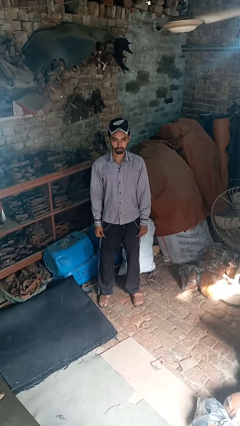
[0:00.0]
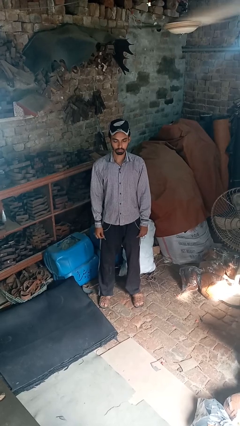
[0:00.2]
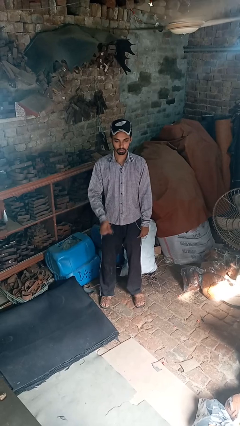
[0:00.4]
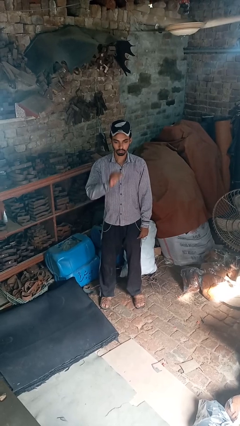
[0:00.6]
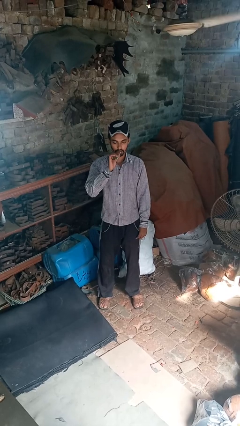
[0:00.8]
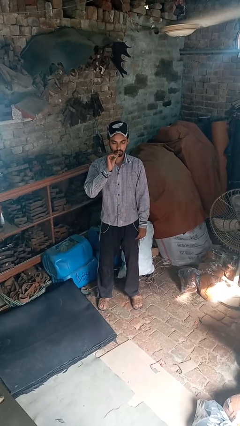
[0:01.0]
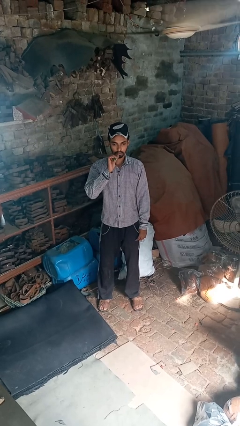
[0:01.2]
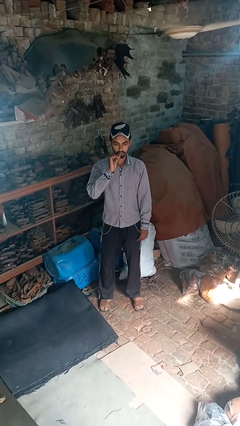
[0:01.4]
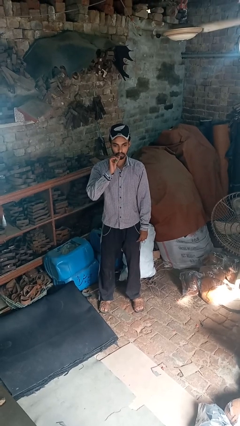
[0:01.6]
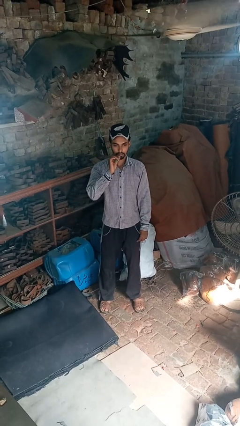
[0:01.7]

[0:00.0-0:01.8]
person flosses

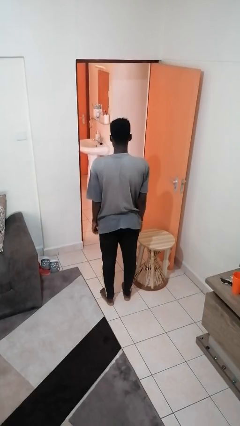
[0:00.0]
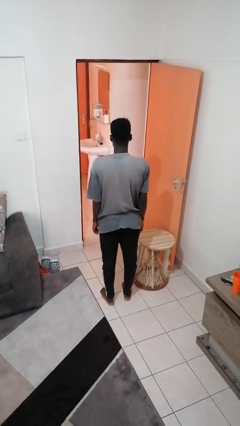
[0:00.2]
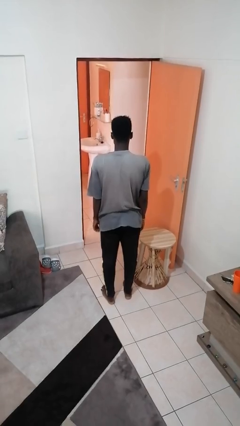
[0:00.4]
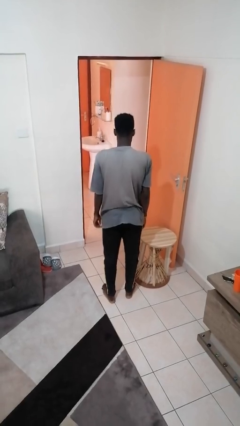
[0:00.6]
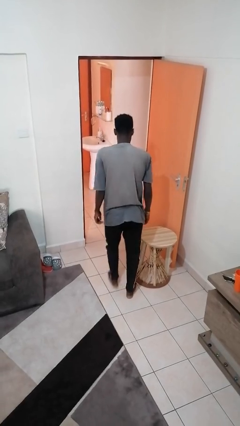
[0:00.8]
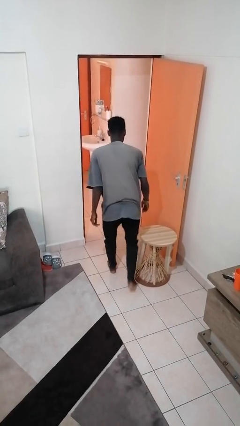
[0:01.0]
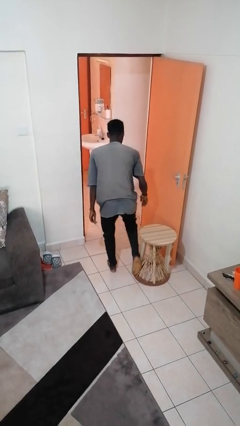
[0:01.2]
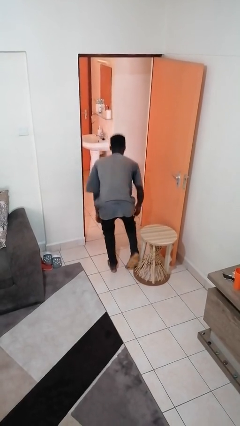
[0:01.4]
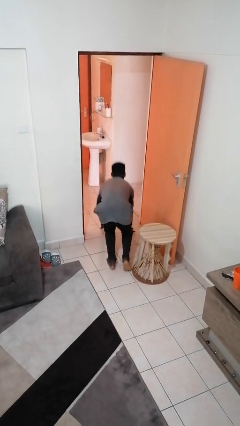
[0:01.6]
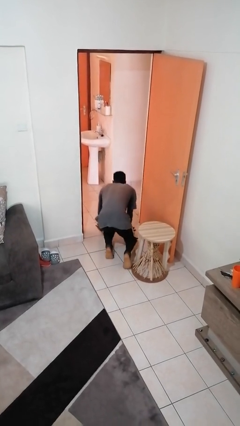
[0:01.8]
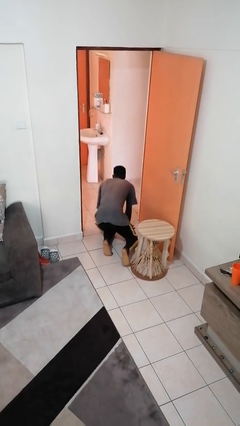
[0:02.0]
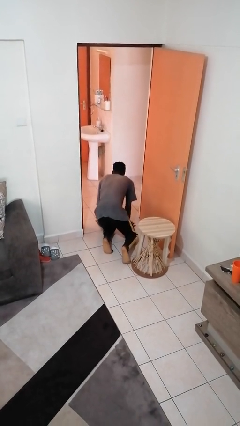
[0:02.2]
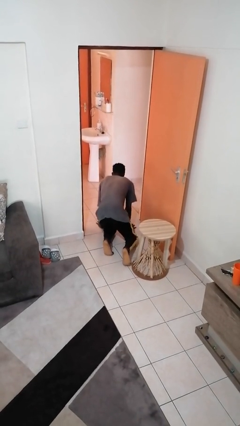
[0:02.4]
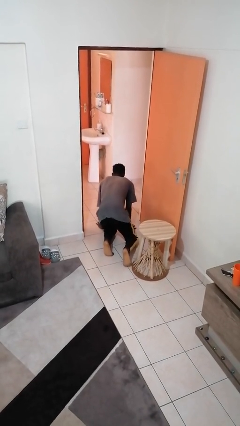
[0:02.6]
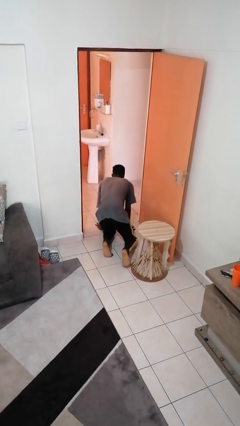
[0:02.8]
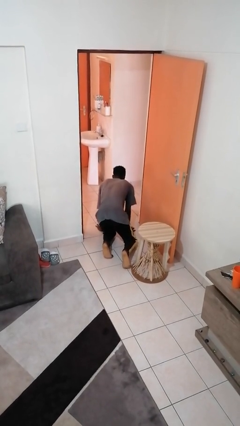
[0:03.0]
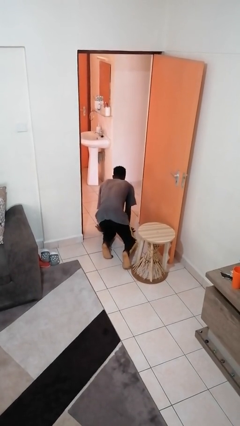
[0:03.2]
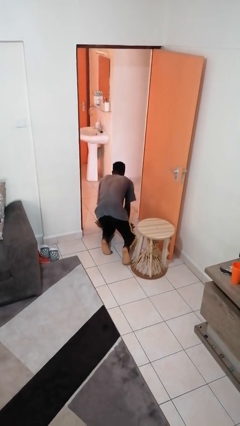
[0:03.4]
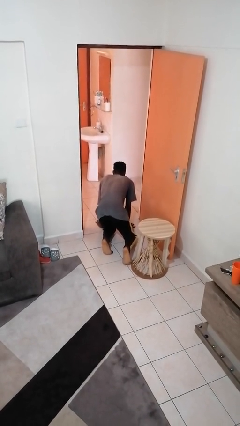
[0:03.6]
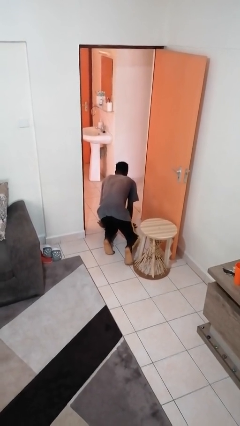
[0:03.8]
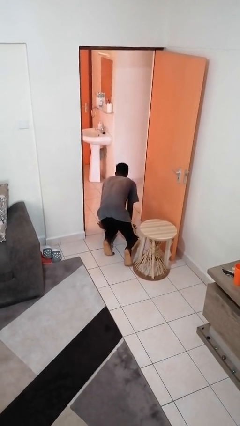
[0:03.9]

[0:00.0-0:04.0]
person trips on object on floor

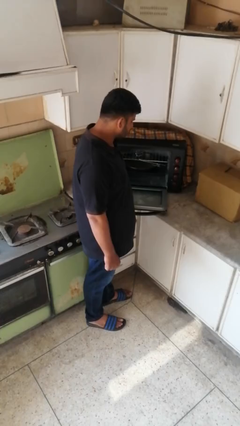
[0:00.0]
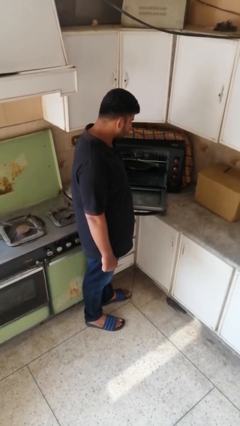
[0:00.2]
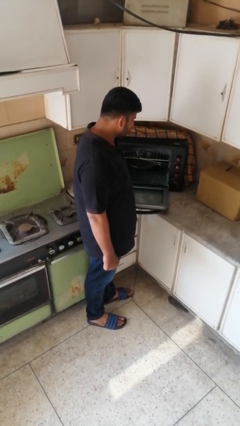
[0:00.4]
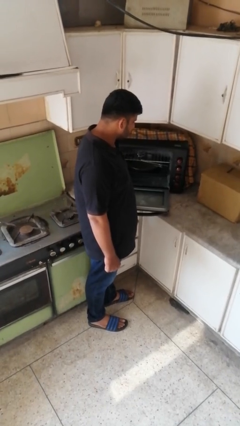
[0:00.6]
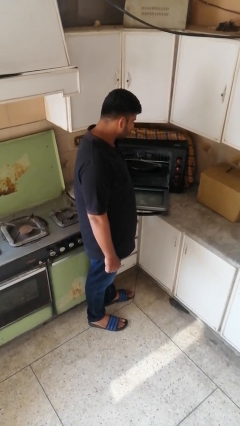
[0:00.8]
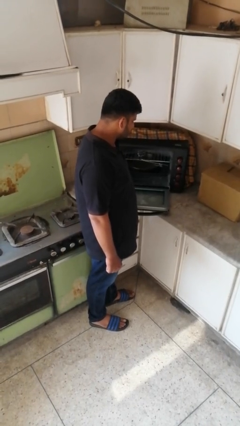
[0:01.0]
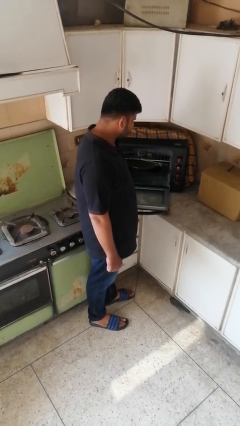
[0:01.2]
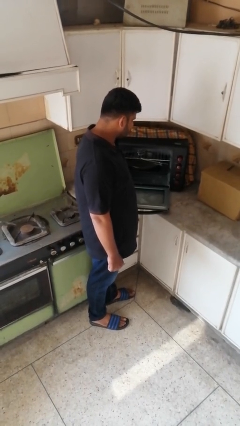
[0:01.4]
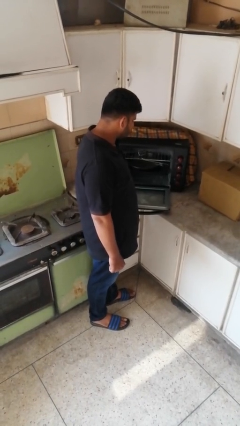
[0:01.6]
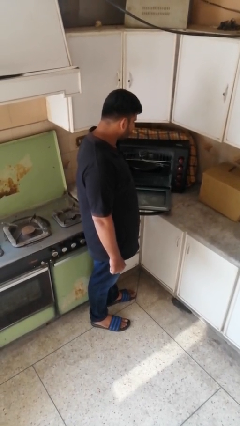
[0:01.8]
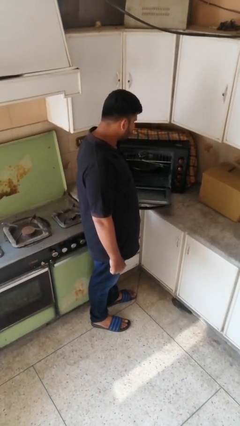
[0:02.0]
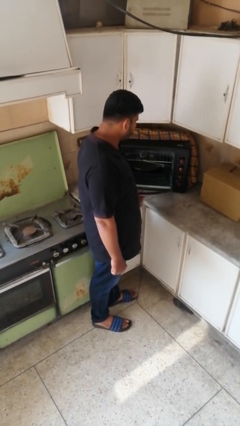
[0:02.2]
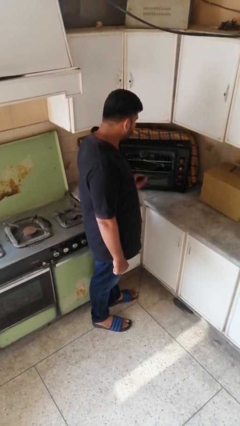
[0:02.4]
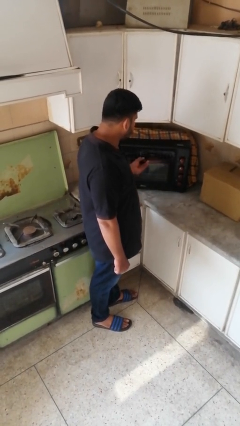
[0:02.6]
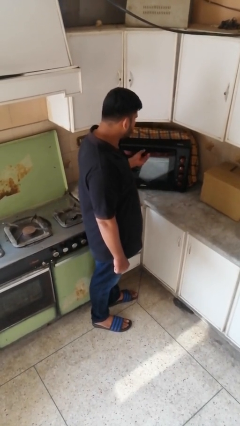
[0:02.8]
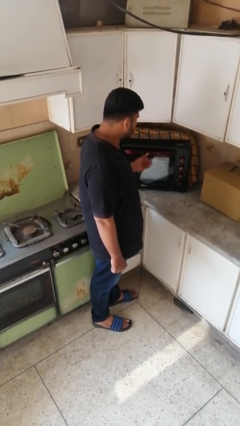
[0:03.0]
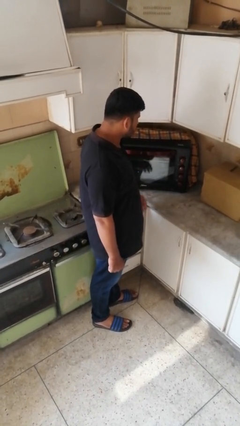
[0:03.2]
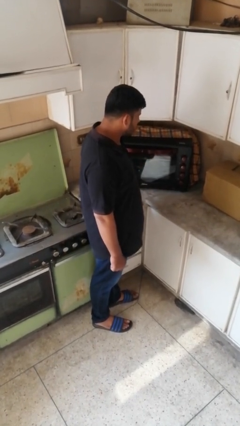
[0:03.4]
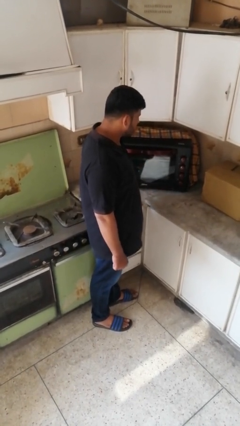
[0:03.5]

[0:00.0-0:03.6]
person closes oven door

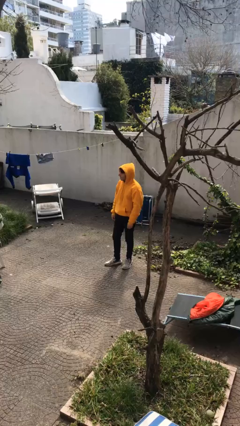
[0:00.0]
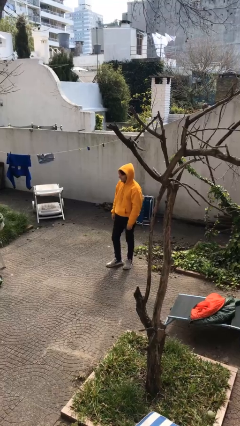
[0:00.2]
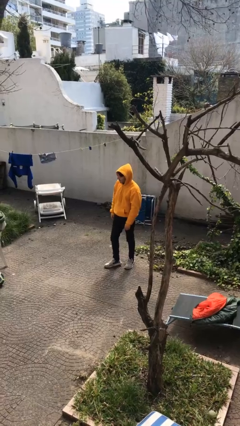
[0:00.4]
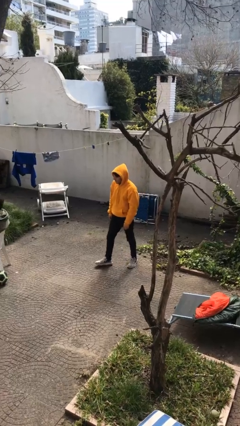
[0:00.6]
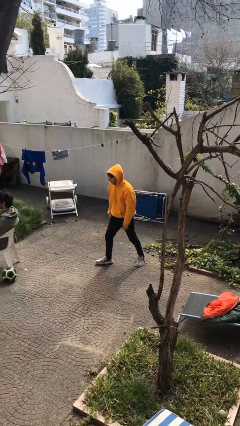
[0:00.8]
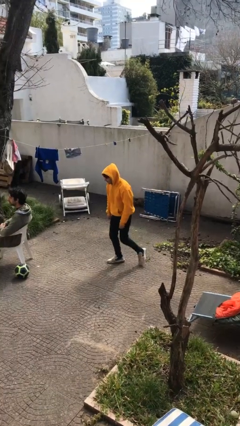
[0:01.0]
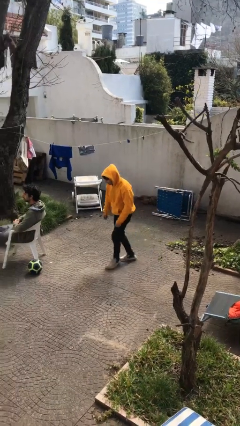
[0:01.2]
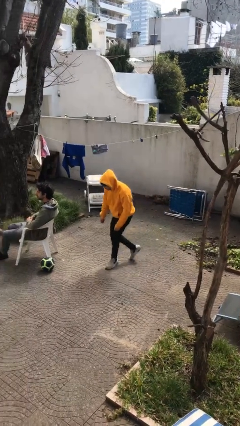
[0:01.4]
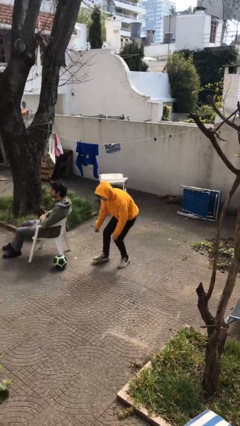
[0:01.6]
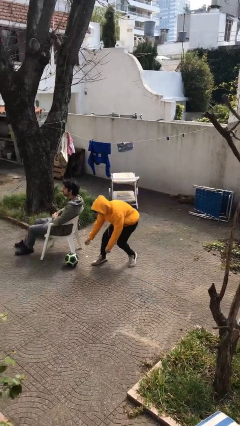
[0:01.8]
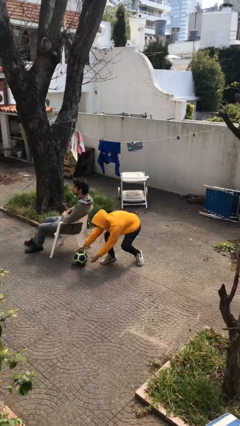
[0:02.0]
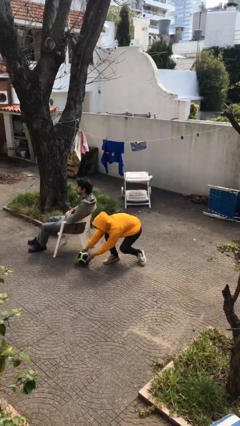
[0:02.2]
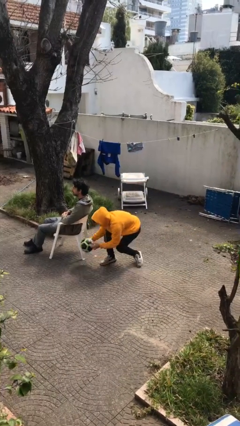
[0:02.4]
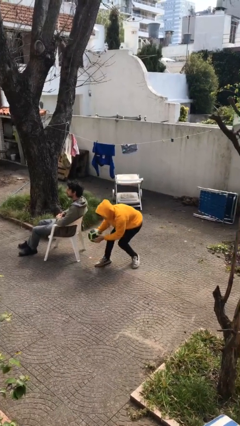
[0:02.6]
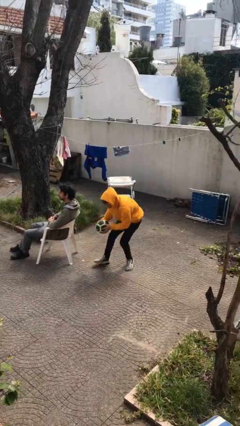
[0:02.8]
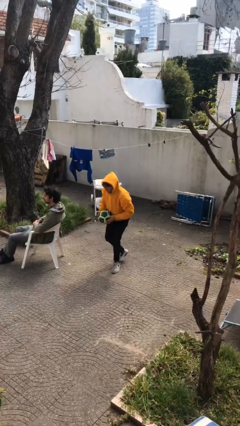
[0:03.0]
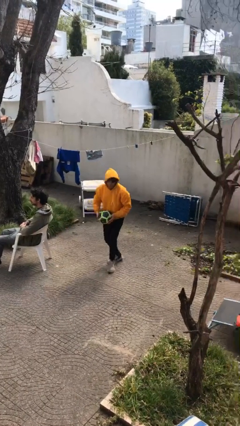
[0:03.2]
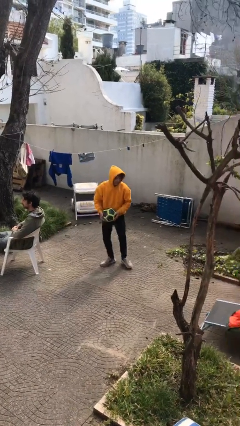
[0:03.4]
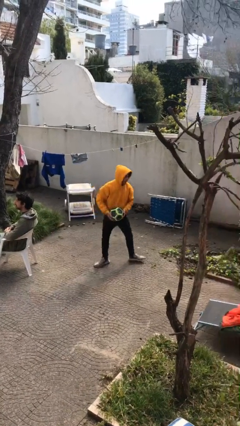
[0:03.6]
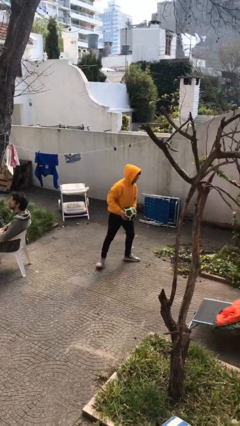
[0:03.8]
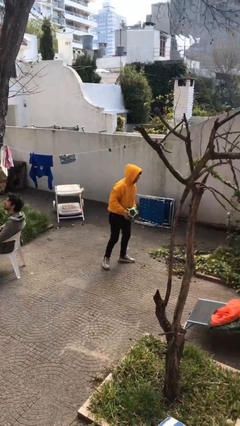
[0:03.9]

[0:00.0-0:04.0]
person steals object from person

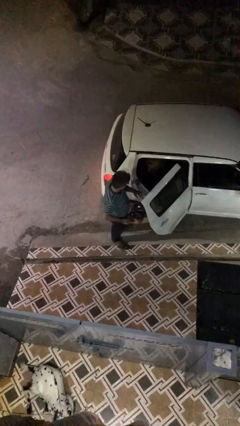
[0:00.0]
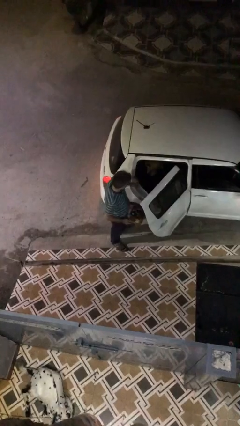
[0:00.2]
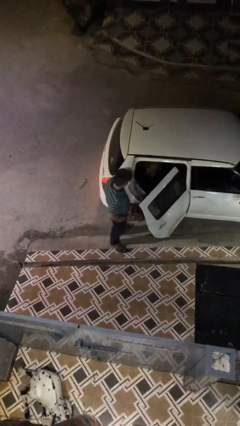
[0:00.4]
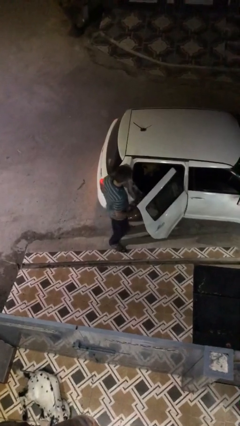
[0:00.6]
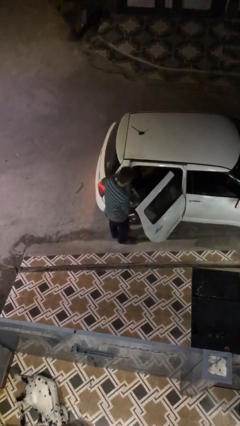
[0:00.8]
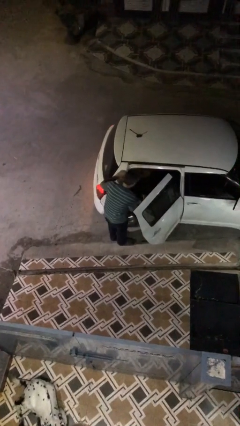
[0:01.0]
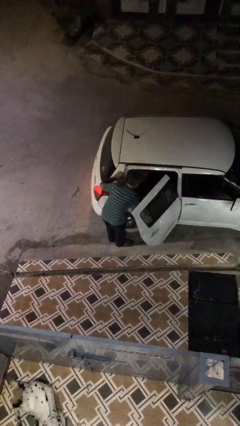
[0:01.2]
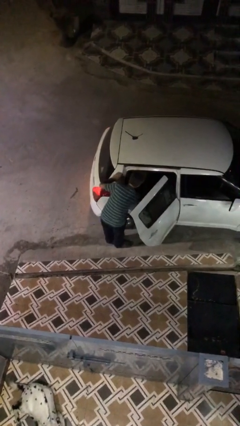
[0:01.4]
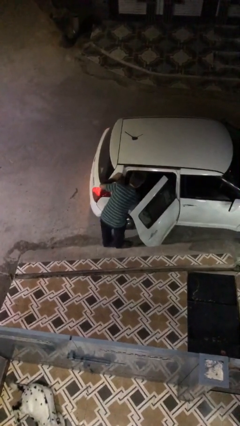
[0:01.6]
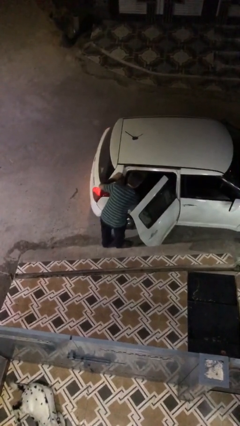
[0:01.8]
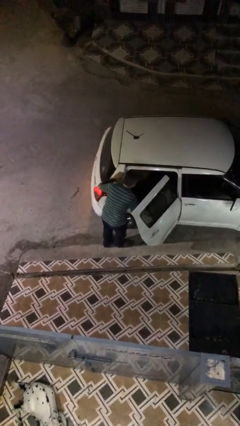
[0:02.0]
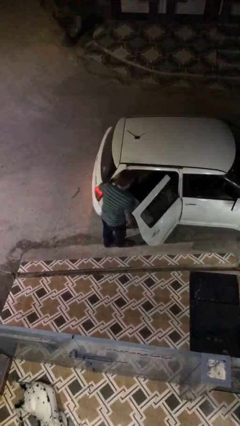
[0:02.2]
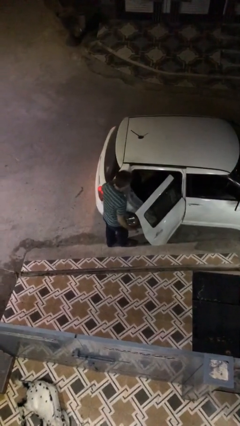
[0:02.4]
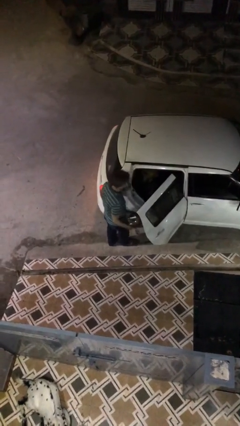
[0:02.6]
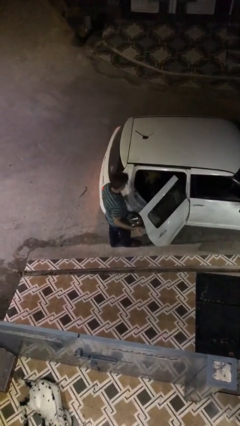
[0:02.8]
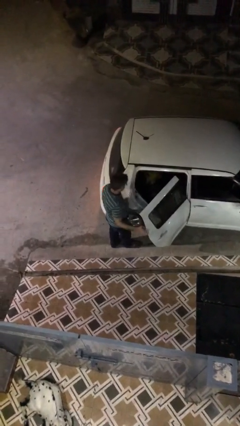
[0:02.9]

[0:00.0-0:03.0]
person loads car

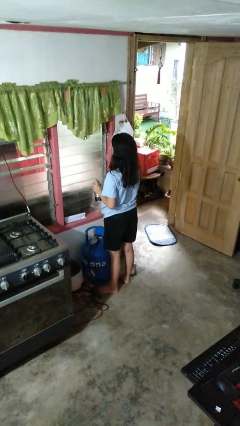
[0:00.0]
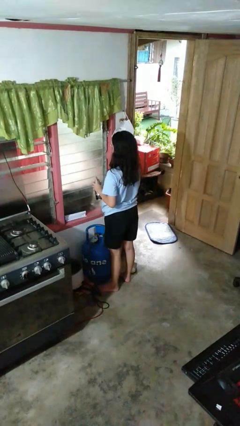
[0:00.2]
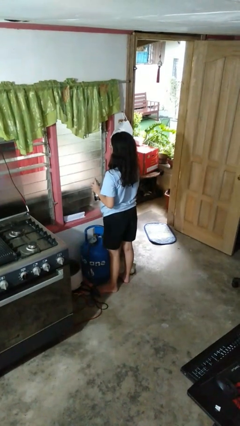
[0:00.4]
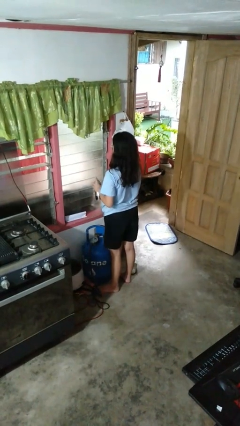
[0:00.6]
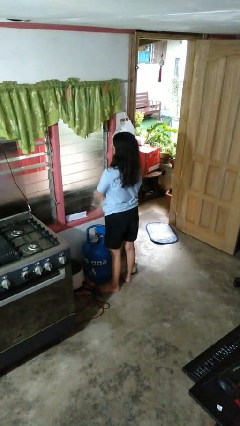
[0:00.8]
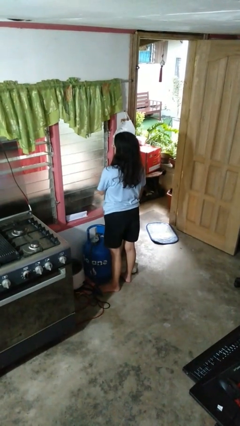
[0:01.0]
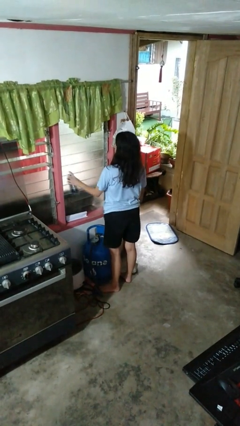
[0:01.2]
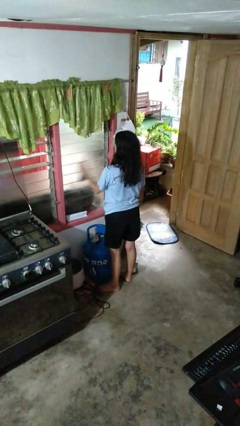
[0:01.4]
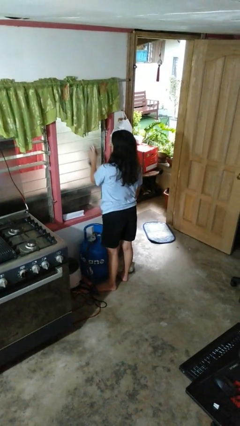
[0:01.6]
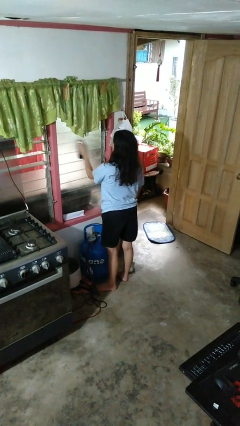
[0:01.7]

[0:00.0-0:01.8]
person sprays from bottle
